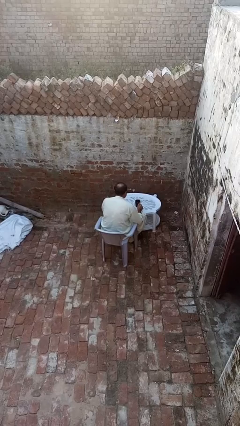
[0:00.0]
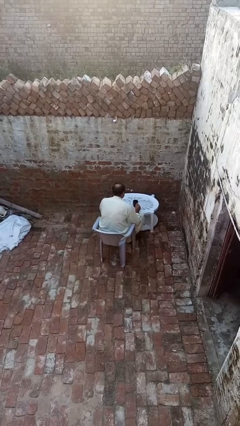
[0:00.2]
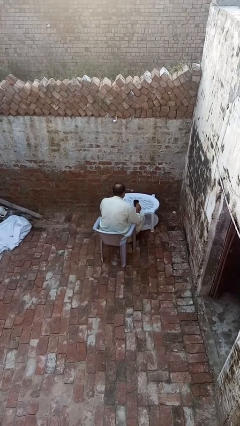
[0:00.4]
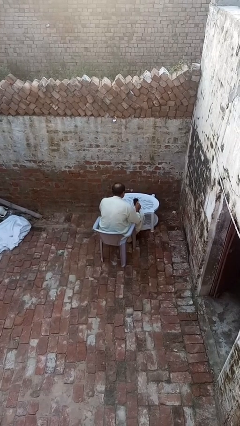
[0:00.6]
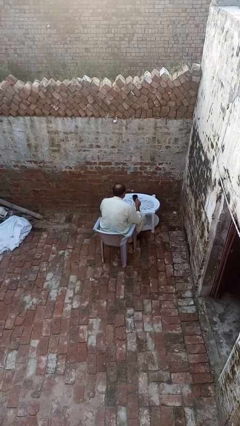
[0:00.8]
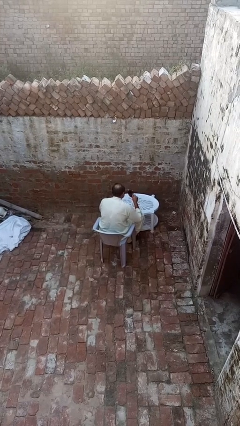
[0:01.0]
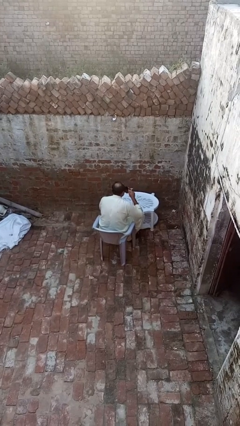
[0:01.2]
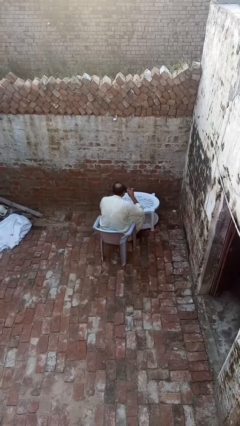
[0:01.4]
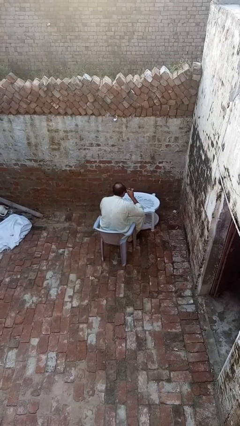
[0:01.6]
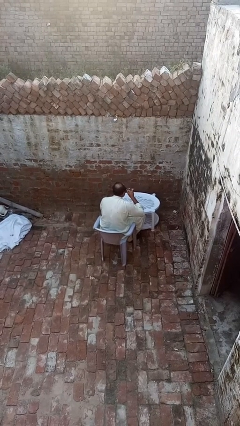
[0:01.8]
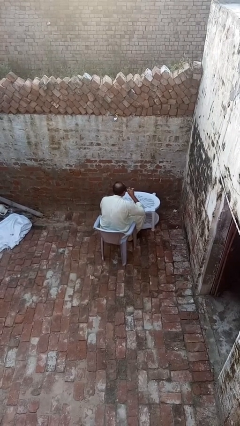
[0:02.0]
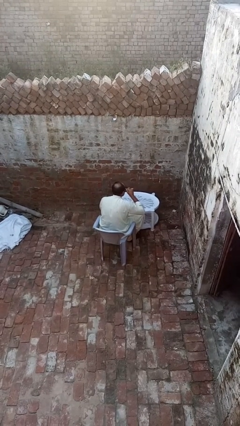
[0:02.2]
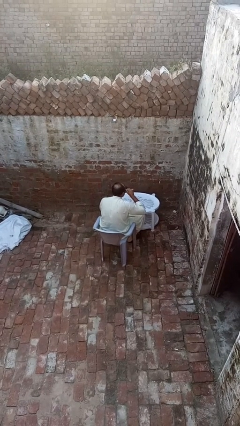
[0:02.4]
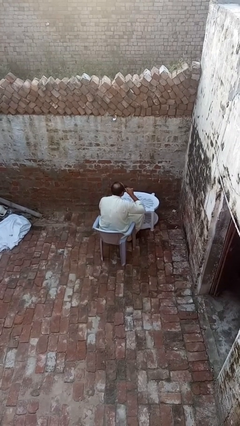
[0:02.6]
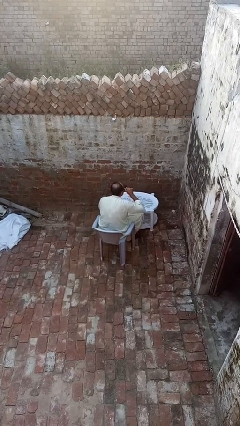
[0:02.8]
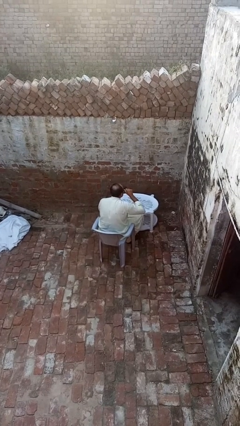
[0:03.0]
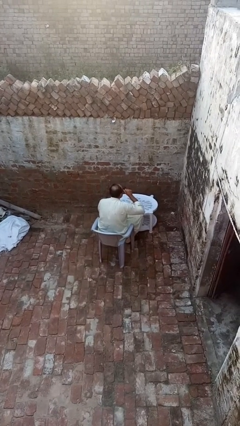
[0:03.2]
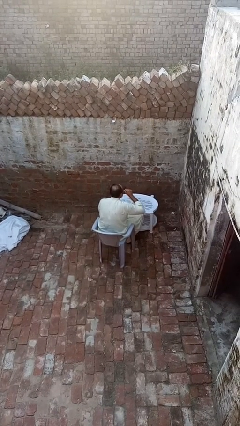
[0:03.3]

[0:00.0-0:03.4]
person drinks from mug

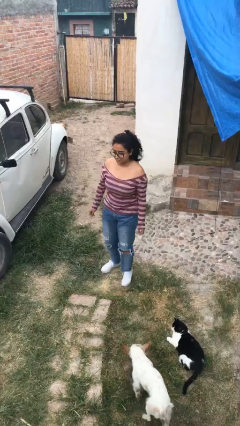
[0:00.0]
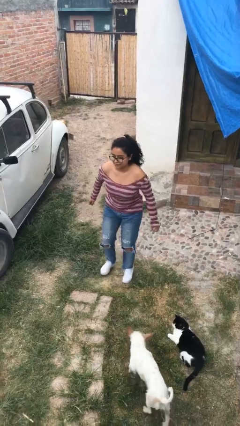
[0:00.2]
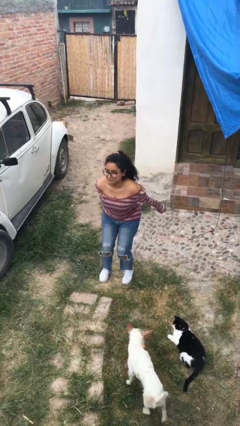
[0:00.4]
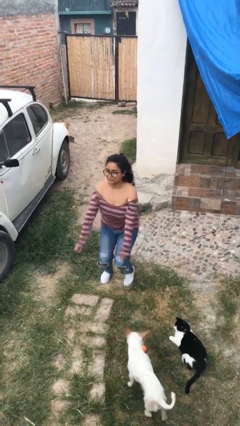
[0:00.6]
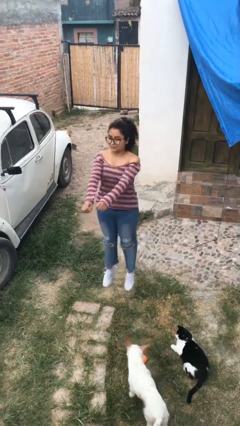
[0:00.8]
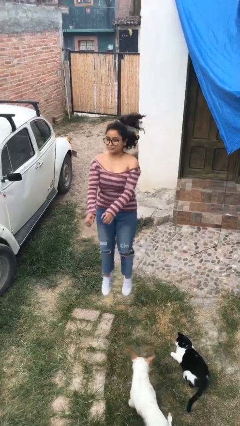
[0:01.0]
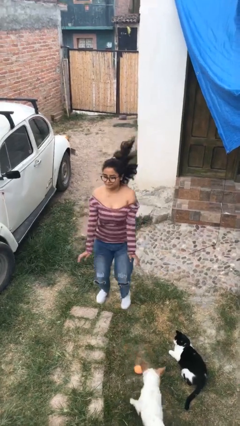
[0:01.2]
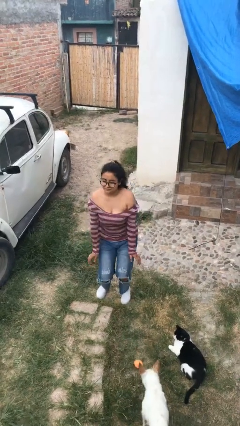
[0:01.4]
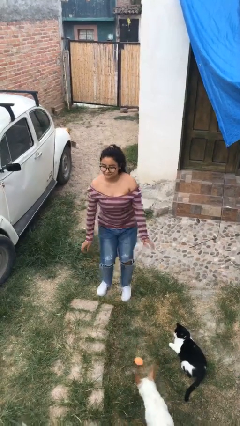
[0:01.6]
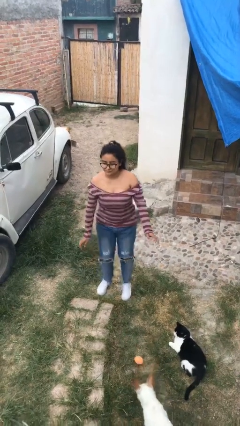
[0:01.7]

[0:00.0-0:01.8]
person jumps

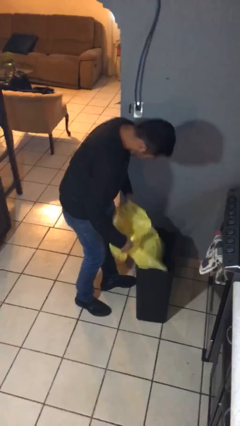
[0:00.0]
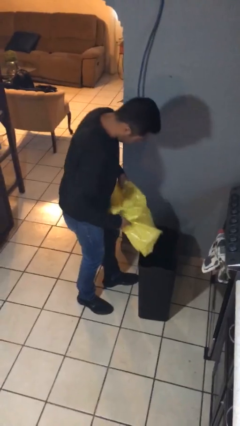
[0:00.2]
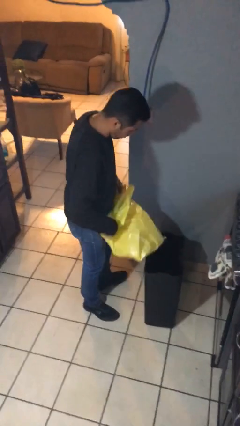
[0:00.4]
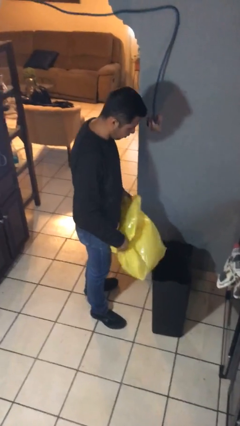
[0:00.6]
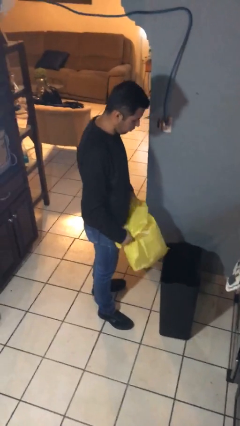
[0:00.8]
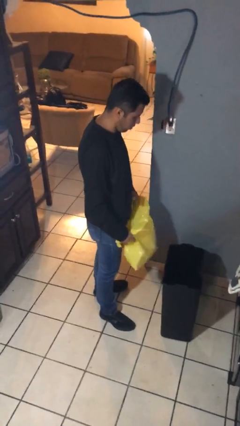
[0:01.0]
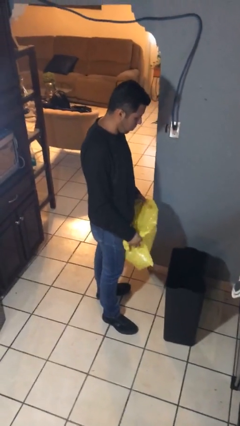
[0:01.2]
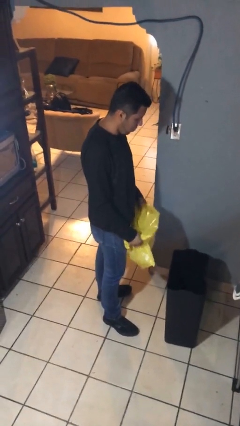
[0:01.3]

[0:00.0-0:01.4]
person removes trashbag from trashcan

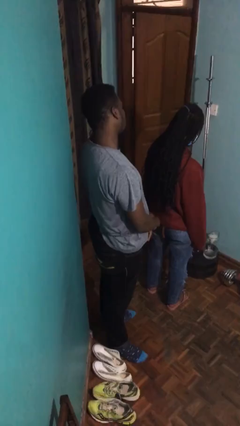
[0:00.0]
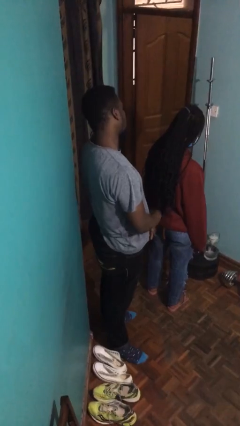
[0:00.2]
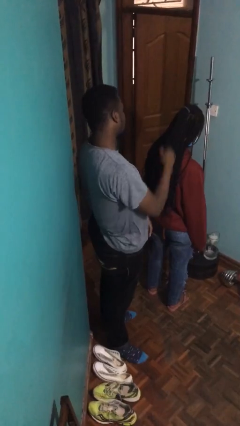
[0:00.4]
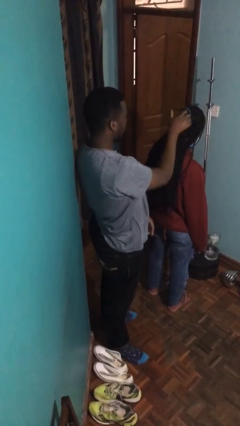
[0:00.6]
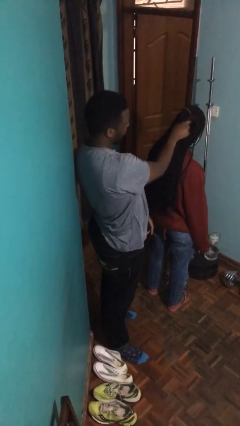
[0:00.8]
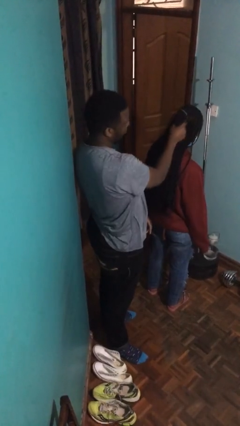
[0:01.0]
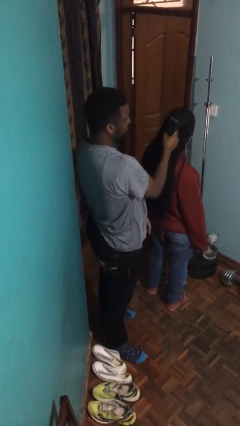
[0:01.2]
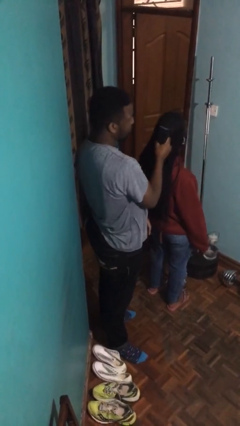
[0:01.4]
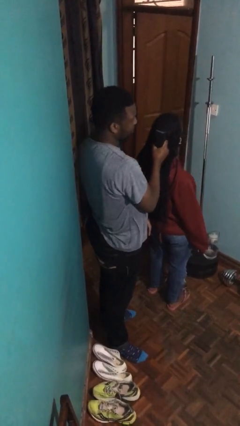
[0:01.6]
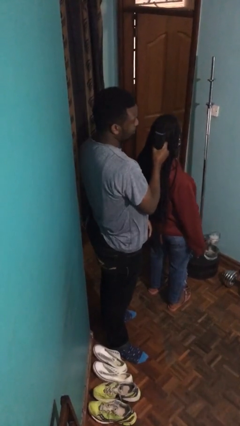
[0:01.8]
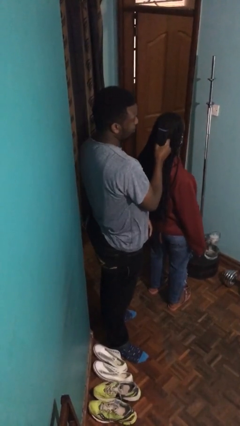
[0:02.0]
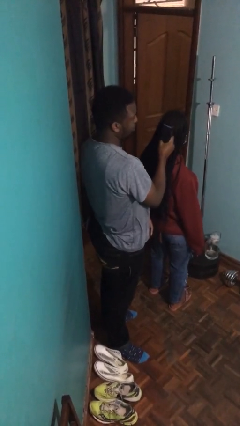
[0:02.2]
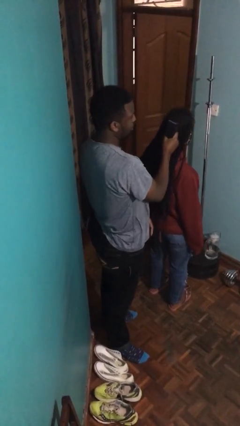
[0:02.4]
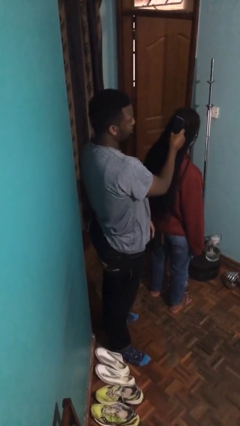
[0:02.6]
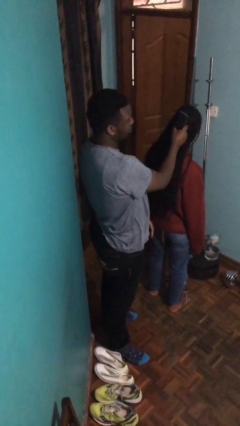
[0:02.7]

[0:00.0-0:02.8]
person grabs person by hair

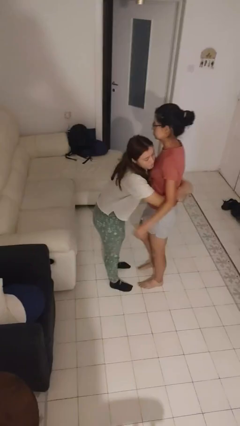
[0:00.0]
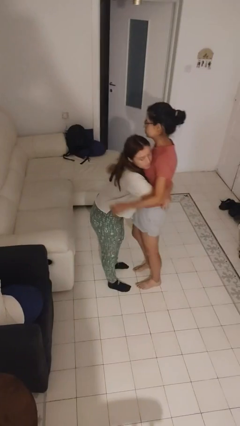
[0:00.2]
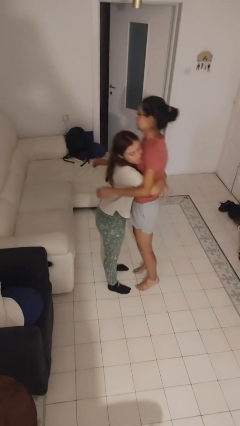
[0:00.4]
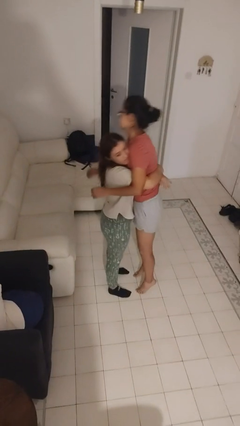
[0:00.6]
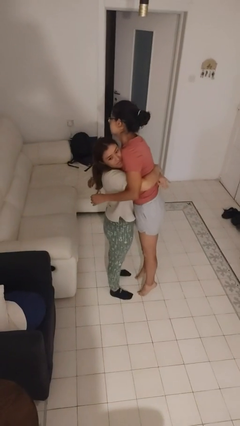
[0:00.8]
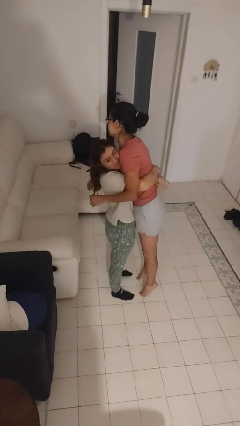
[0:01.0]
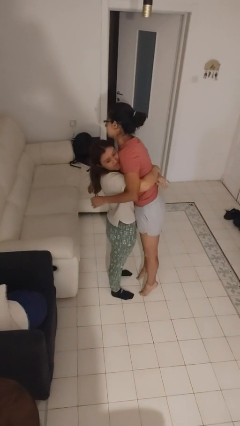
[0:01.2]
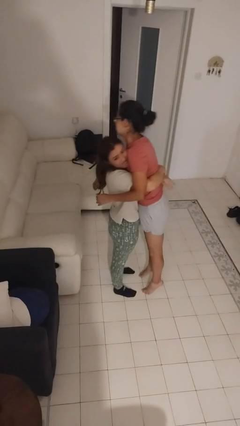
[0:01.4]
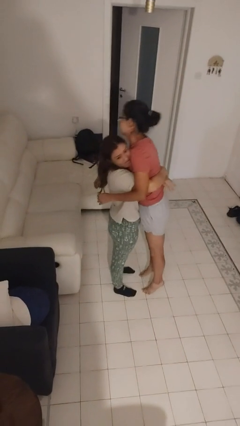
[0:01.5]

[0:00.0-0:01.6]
person picks up person

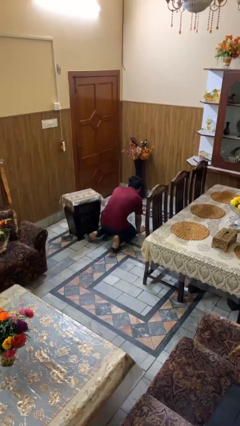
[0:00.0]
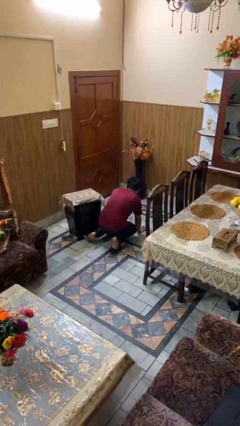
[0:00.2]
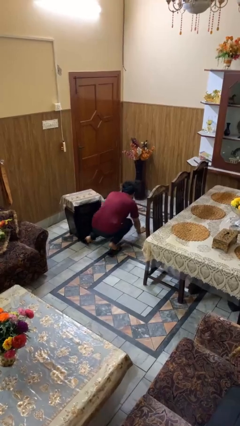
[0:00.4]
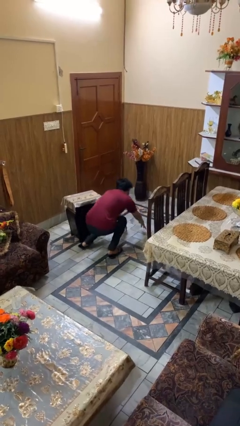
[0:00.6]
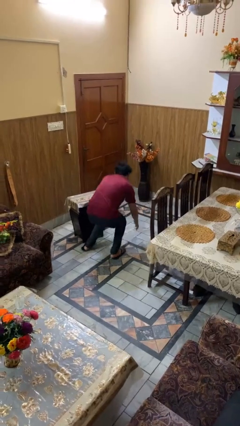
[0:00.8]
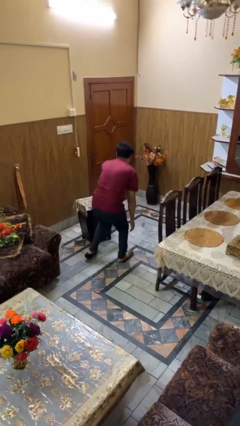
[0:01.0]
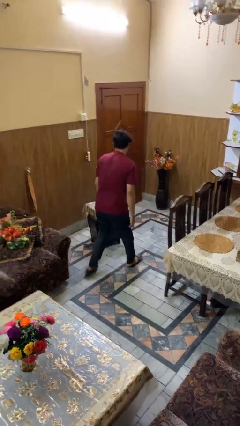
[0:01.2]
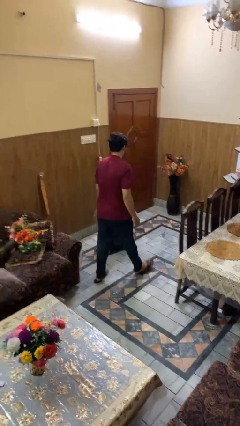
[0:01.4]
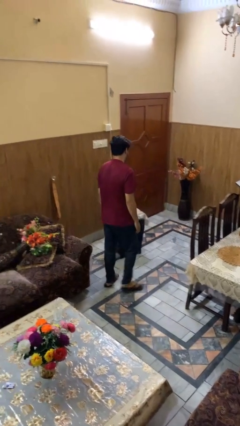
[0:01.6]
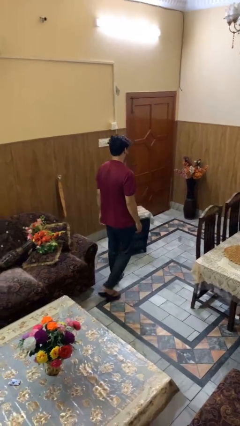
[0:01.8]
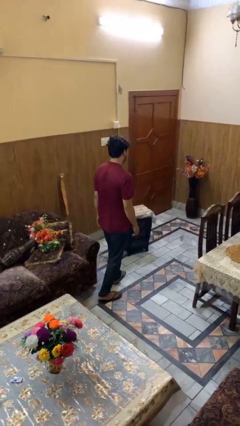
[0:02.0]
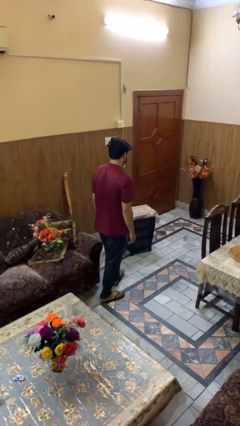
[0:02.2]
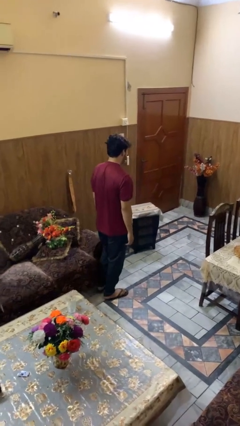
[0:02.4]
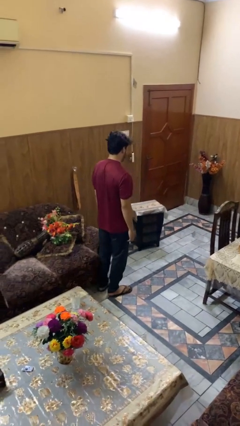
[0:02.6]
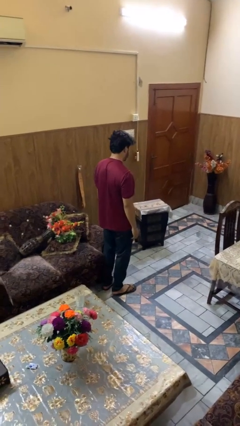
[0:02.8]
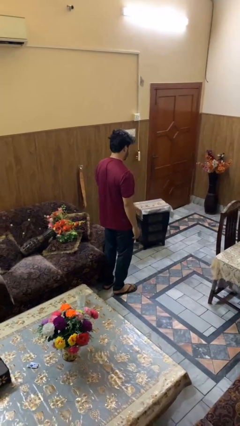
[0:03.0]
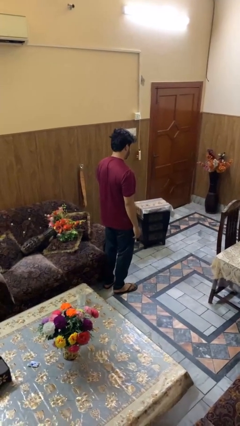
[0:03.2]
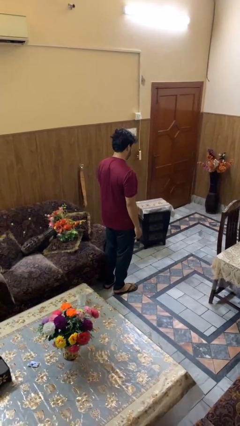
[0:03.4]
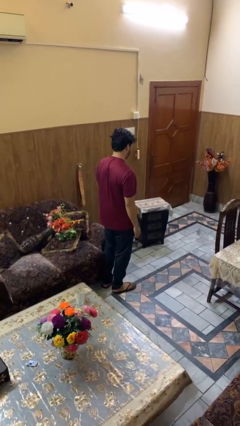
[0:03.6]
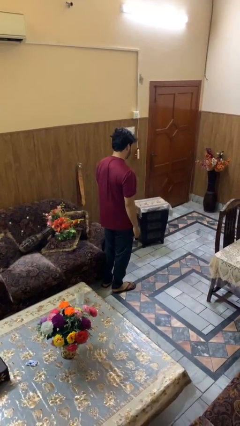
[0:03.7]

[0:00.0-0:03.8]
person stands up from floor

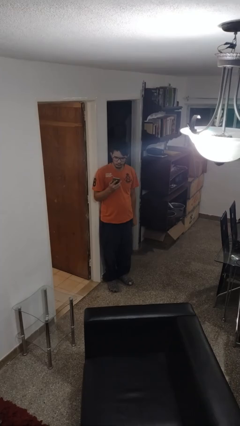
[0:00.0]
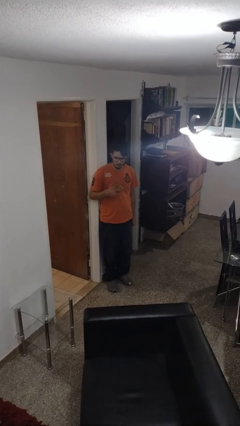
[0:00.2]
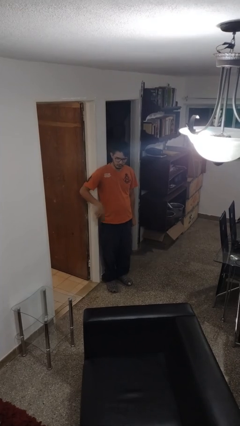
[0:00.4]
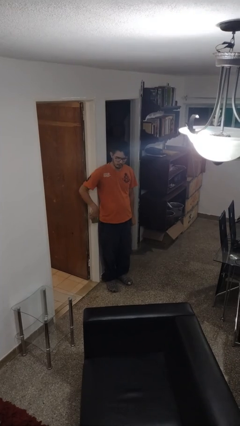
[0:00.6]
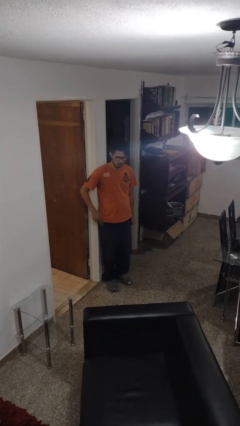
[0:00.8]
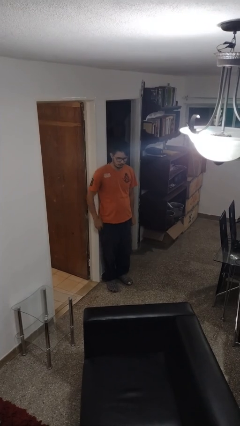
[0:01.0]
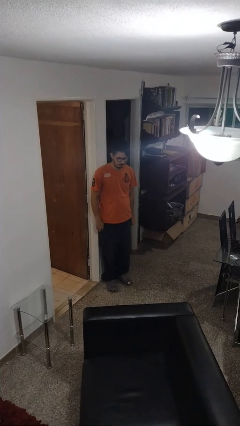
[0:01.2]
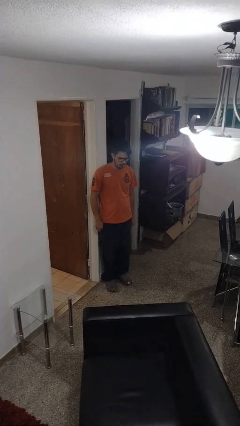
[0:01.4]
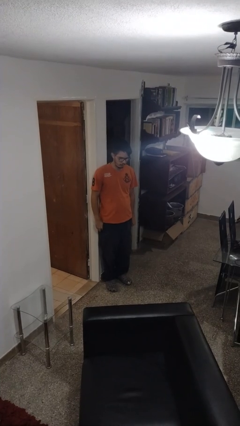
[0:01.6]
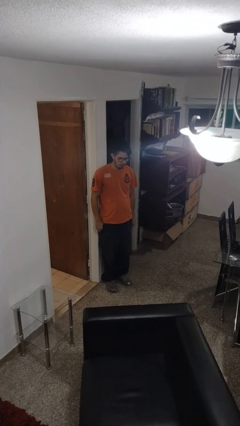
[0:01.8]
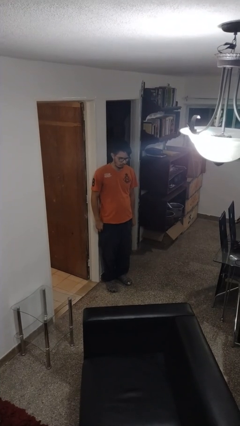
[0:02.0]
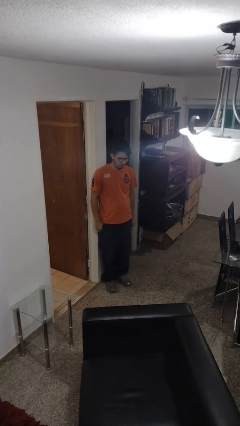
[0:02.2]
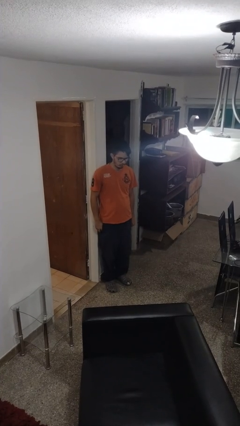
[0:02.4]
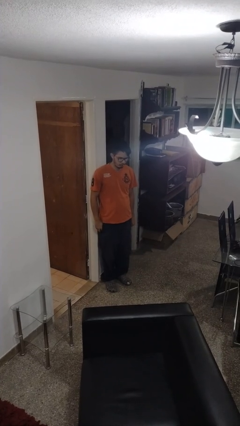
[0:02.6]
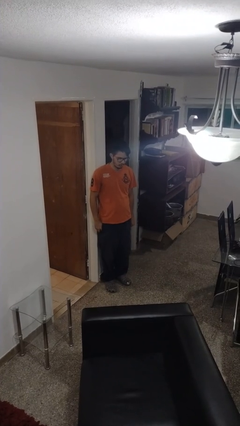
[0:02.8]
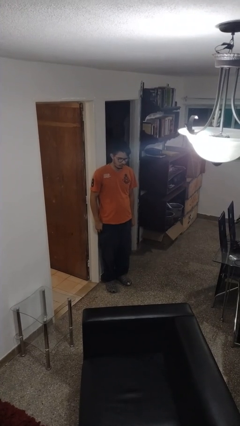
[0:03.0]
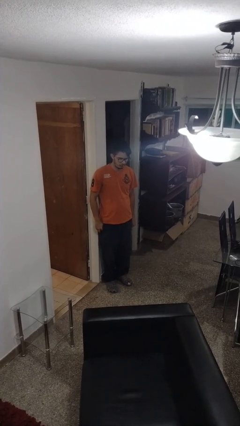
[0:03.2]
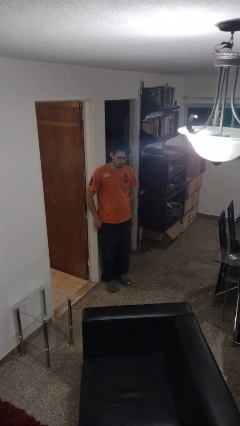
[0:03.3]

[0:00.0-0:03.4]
person puts phone into pocket
